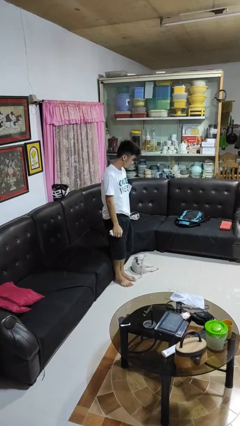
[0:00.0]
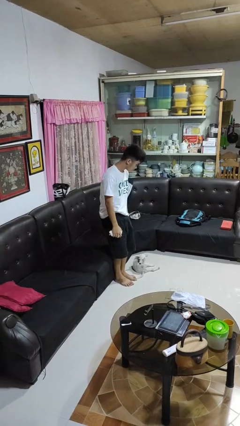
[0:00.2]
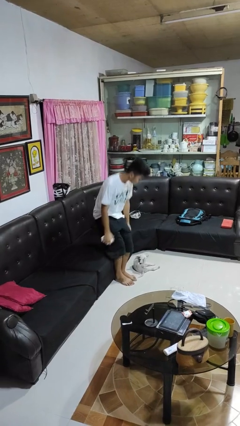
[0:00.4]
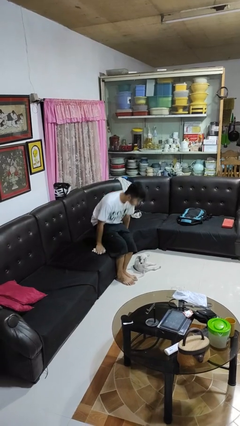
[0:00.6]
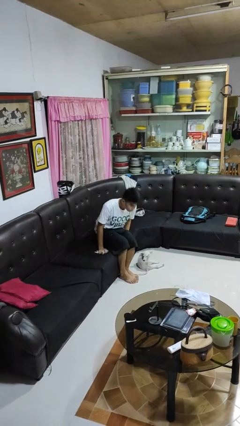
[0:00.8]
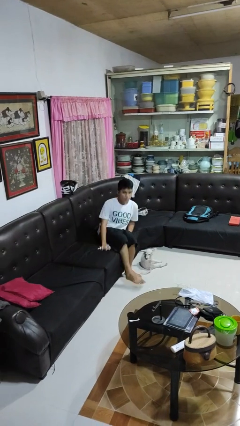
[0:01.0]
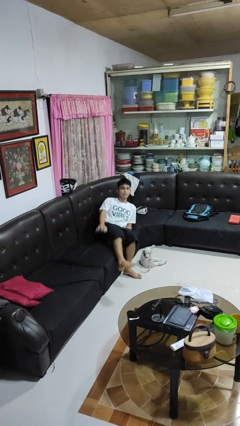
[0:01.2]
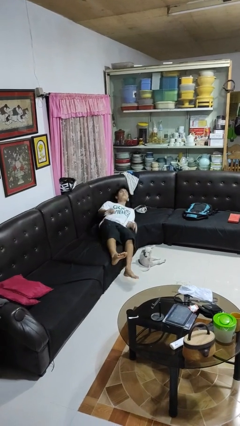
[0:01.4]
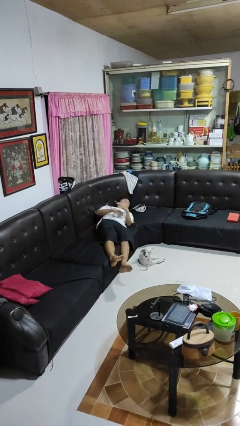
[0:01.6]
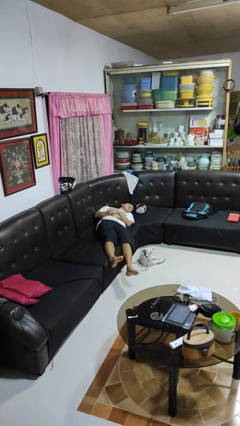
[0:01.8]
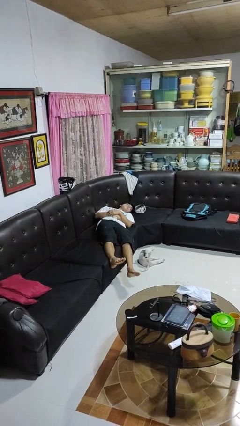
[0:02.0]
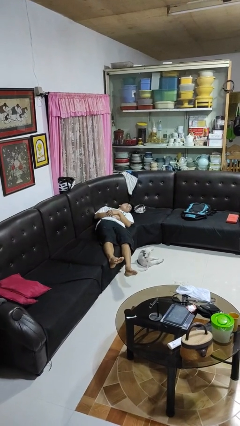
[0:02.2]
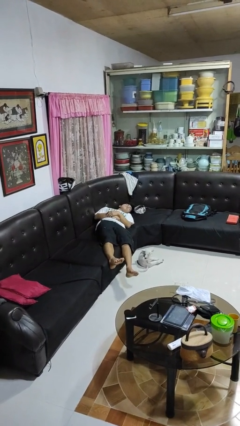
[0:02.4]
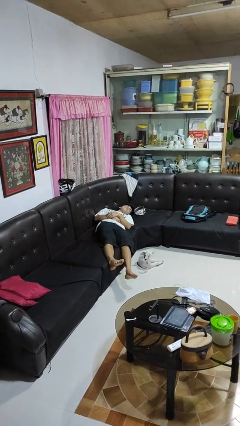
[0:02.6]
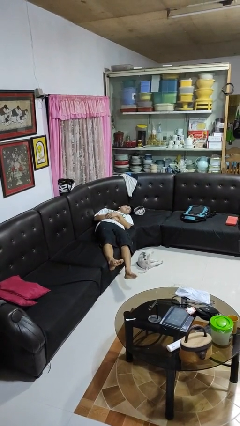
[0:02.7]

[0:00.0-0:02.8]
person lies down on couch

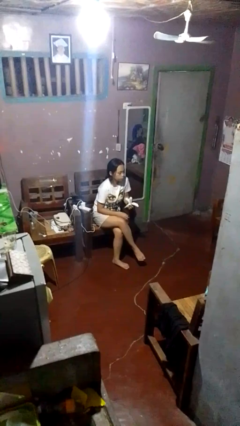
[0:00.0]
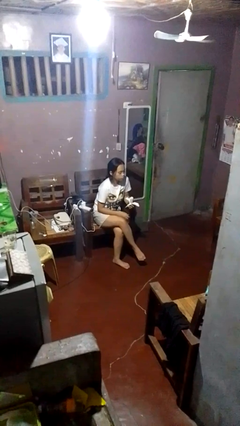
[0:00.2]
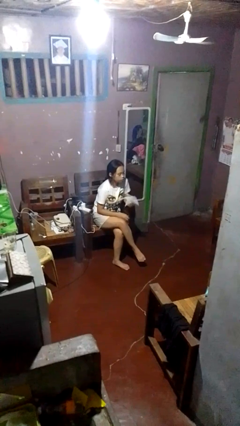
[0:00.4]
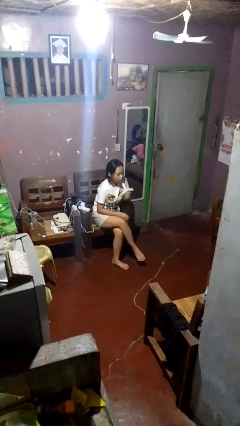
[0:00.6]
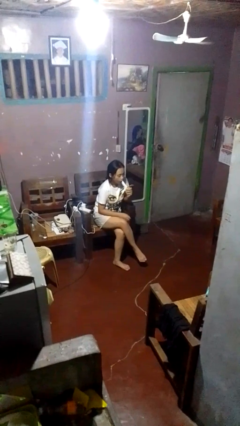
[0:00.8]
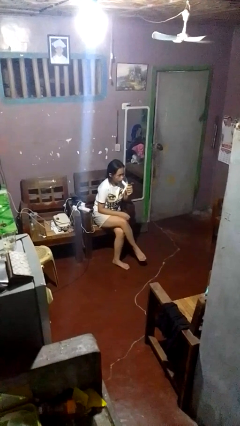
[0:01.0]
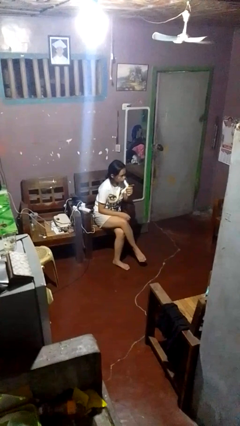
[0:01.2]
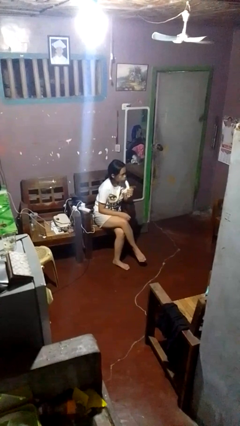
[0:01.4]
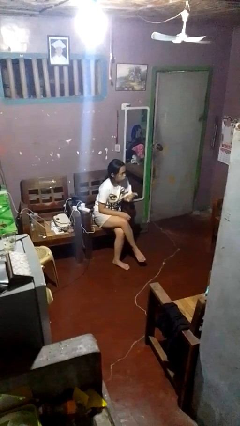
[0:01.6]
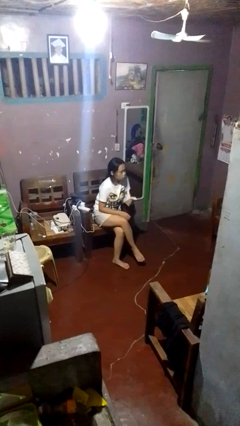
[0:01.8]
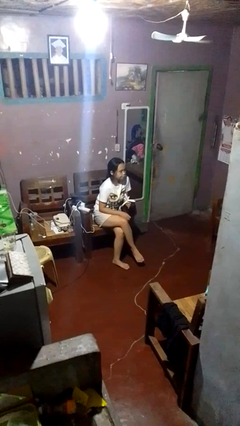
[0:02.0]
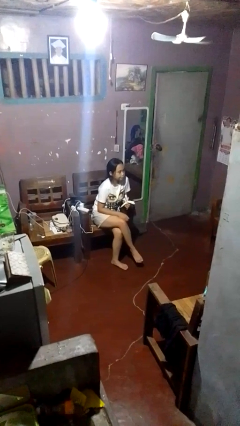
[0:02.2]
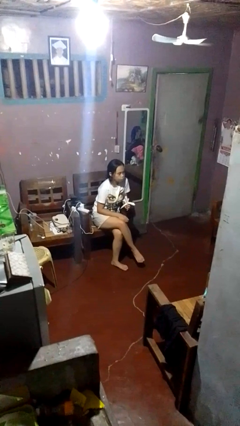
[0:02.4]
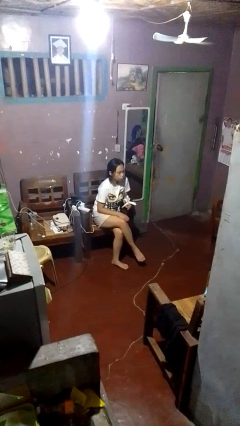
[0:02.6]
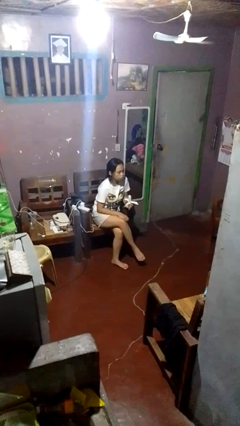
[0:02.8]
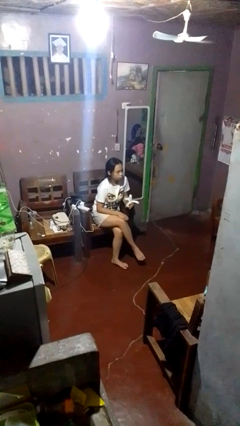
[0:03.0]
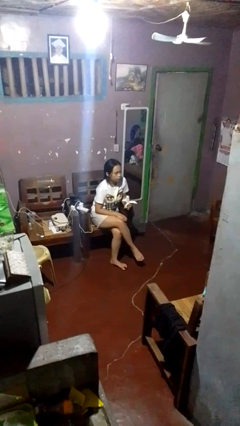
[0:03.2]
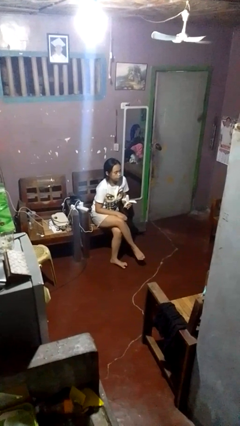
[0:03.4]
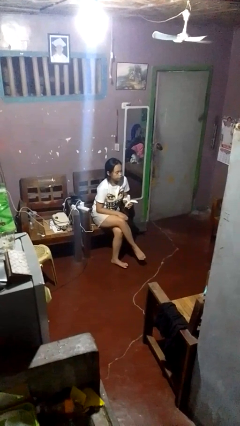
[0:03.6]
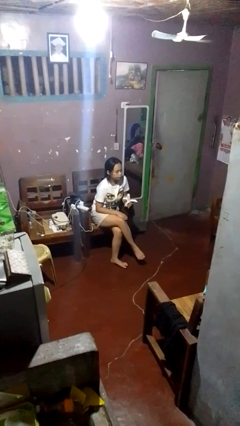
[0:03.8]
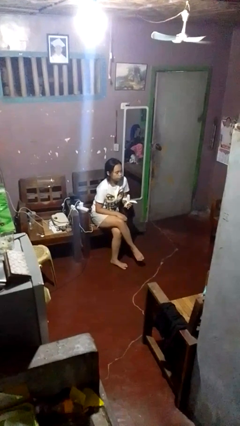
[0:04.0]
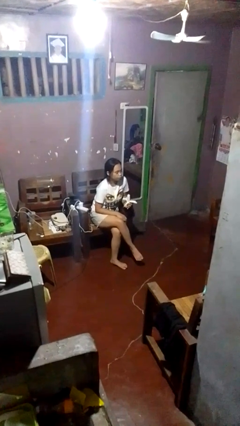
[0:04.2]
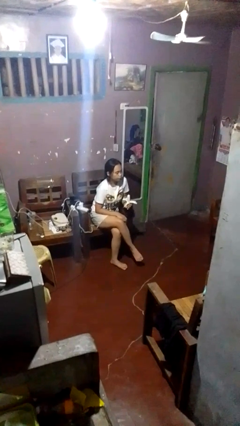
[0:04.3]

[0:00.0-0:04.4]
person eats banana

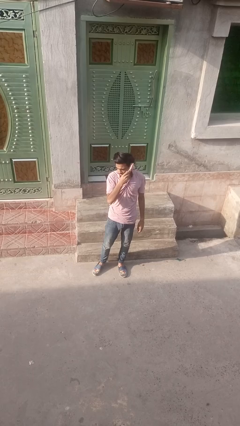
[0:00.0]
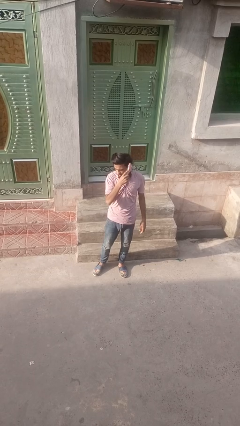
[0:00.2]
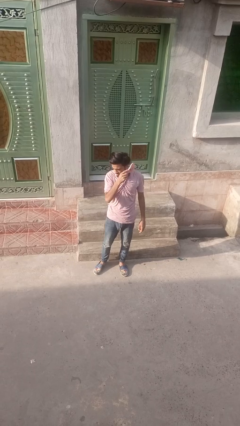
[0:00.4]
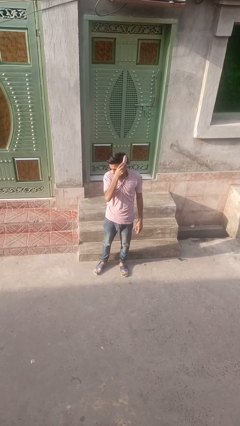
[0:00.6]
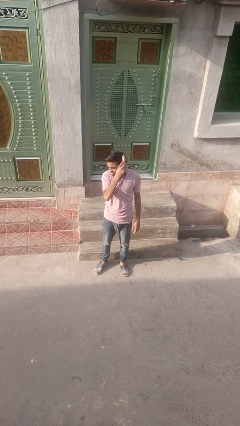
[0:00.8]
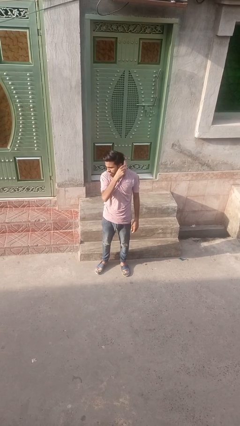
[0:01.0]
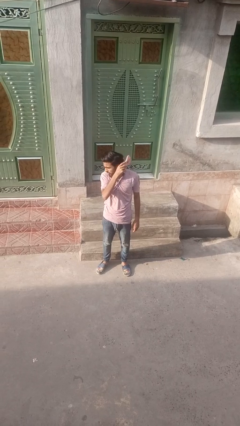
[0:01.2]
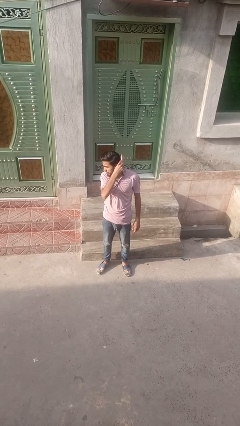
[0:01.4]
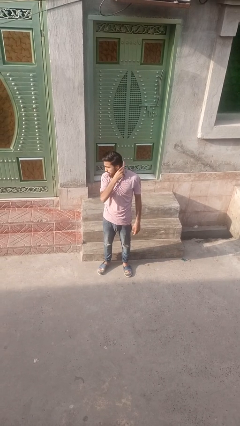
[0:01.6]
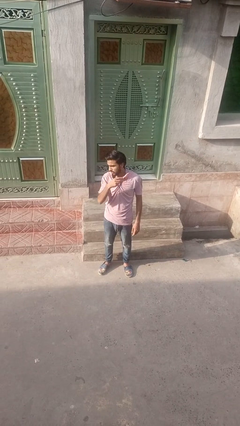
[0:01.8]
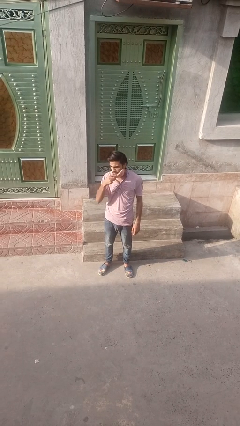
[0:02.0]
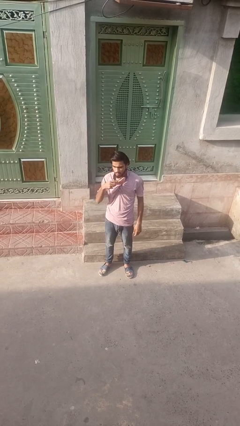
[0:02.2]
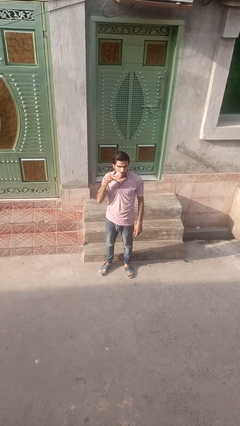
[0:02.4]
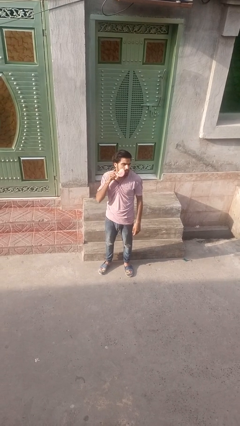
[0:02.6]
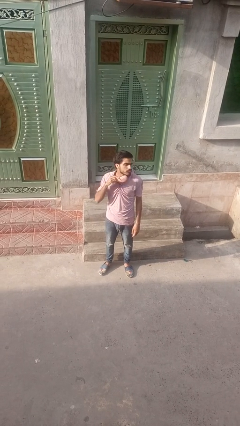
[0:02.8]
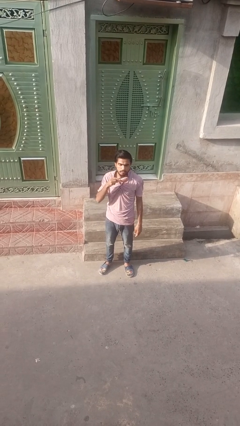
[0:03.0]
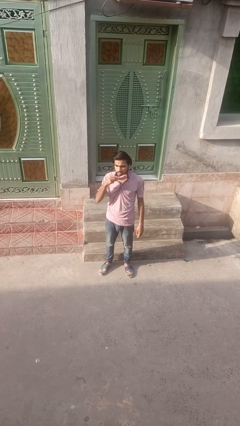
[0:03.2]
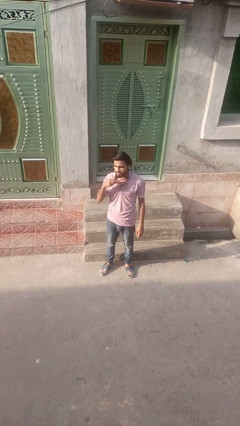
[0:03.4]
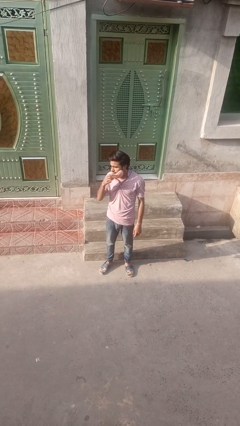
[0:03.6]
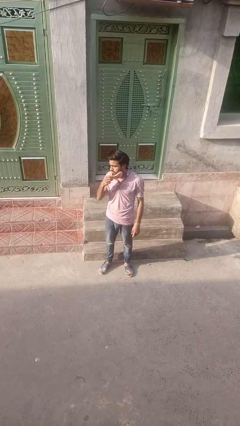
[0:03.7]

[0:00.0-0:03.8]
person brushes hair

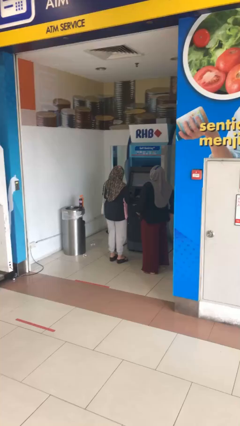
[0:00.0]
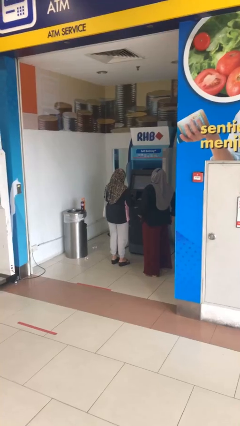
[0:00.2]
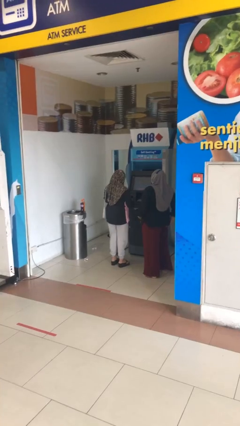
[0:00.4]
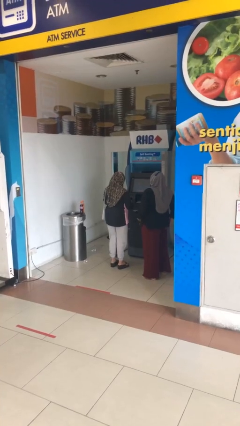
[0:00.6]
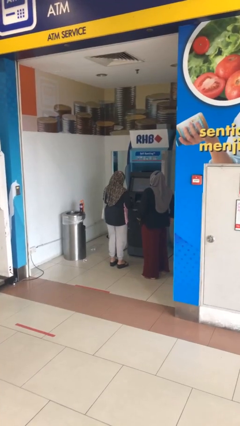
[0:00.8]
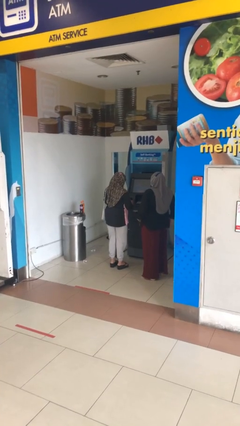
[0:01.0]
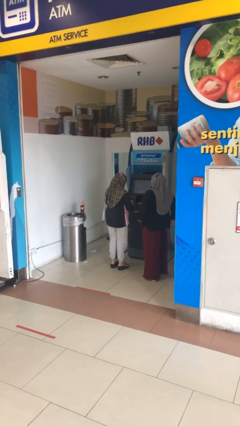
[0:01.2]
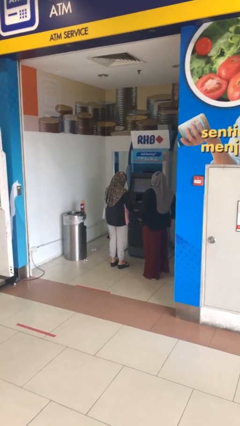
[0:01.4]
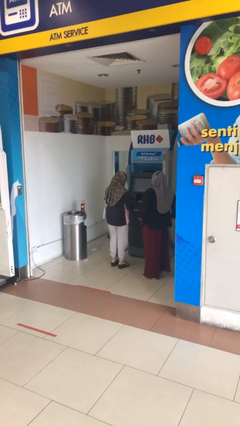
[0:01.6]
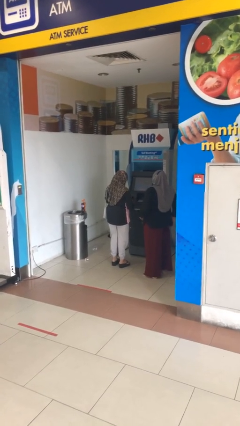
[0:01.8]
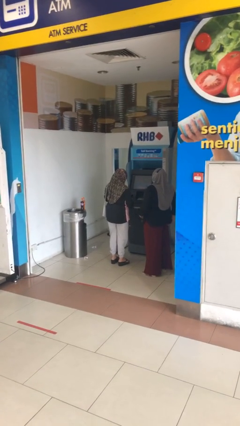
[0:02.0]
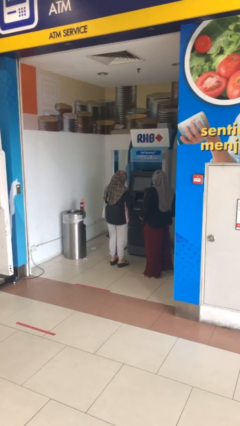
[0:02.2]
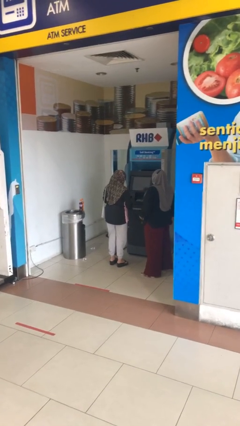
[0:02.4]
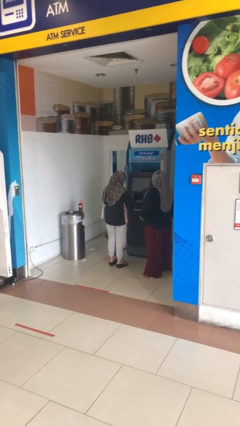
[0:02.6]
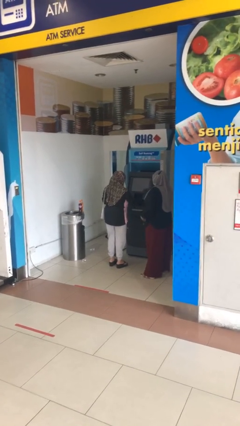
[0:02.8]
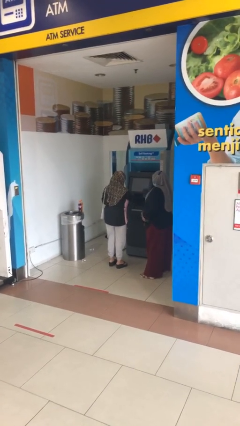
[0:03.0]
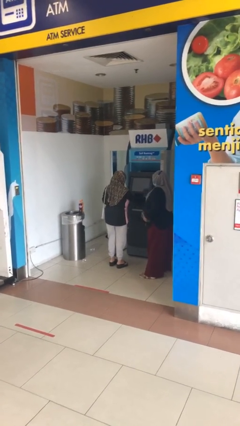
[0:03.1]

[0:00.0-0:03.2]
person purchases from machine

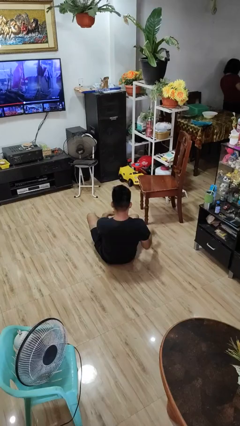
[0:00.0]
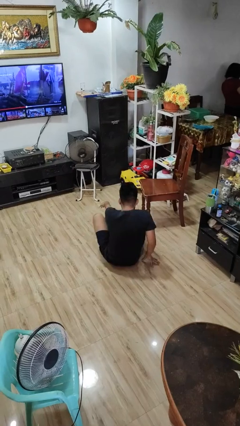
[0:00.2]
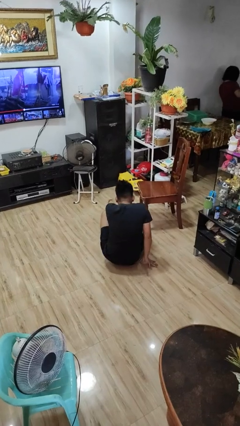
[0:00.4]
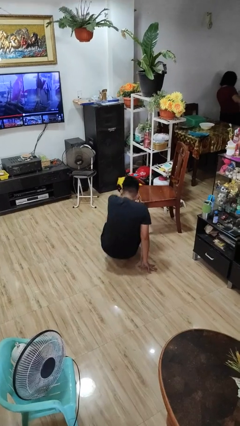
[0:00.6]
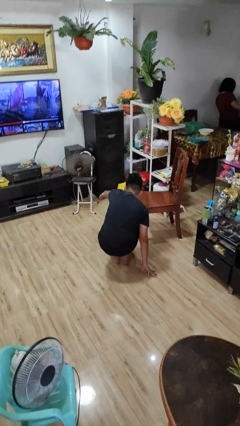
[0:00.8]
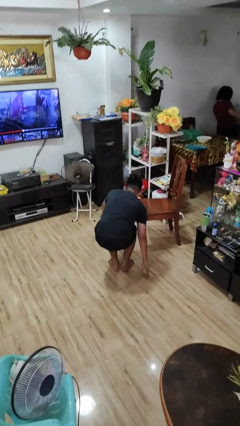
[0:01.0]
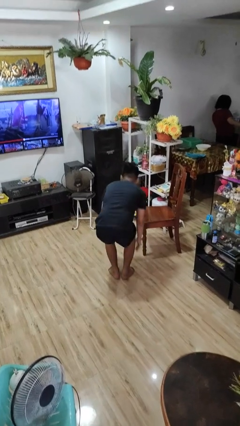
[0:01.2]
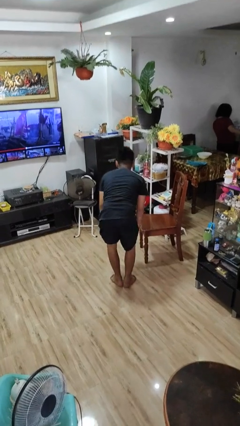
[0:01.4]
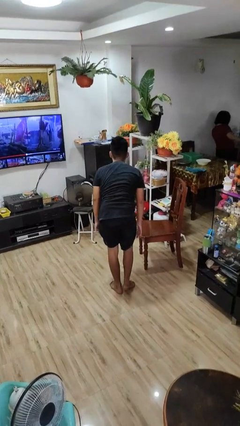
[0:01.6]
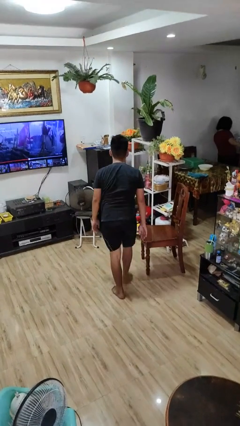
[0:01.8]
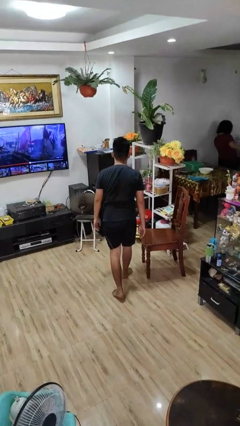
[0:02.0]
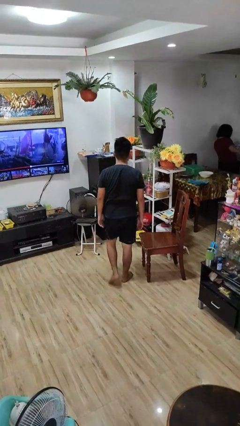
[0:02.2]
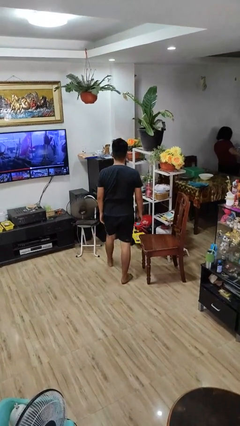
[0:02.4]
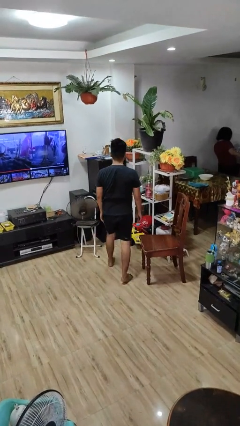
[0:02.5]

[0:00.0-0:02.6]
person stands up from floor

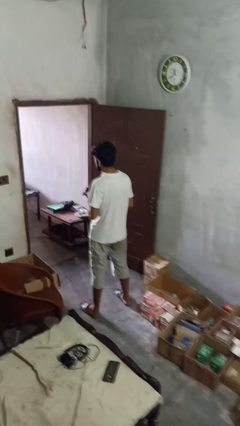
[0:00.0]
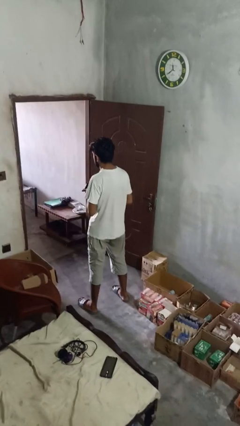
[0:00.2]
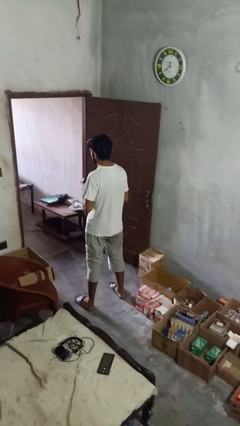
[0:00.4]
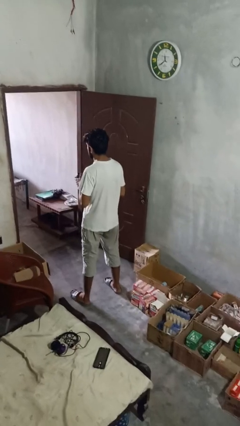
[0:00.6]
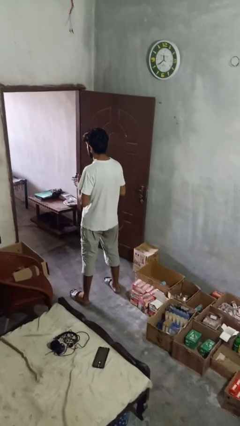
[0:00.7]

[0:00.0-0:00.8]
person takes object from purse
